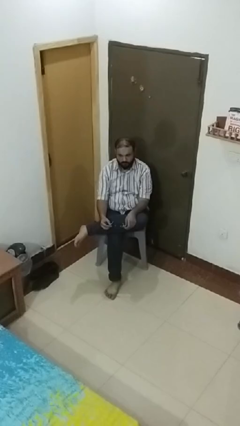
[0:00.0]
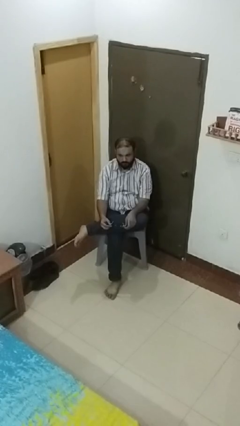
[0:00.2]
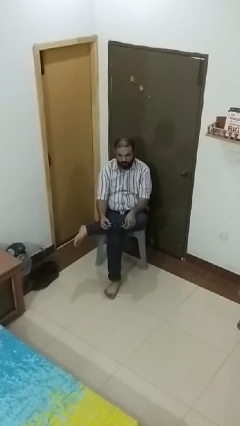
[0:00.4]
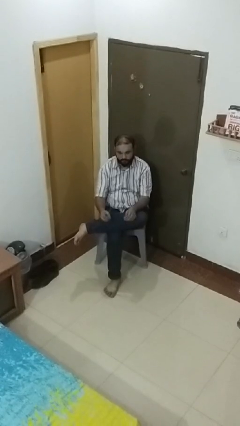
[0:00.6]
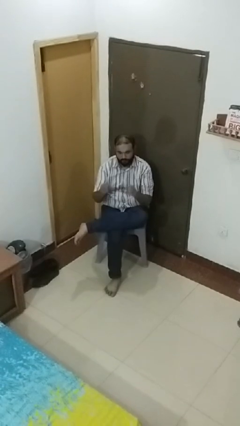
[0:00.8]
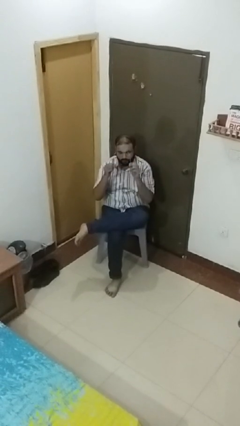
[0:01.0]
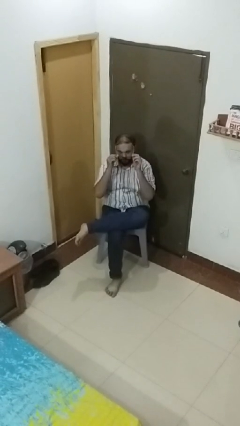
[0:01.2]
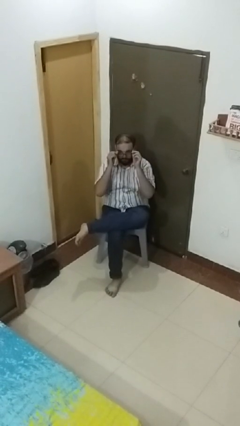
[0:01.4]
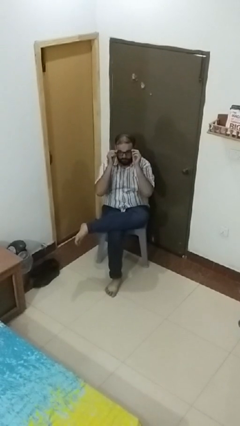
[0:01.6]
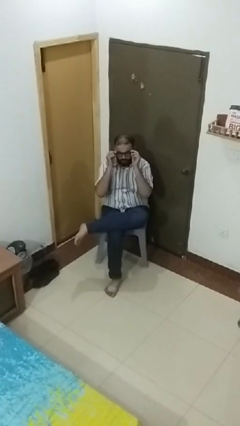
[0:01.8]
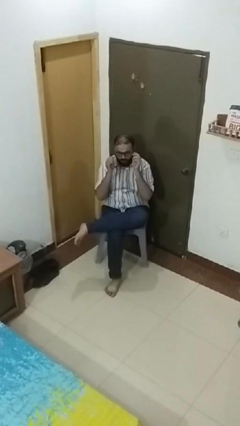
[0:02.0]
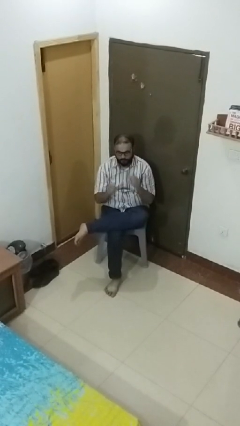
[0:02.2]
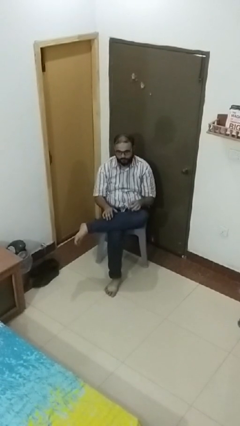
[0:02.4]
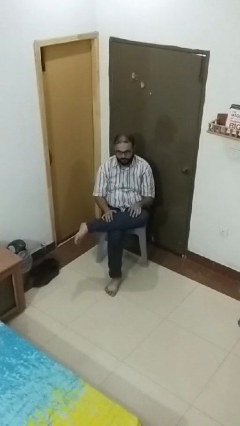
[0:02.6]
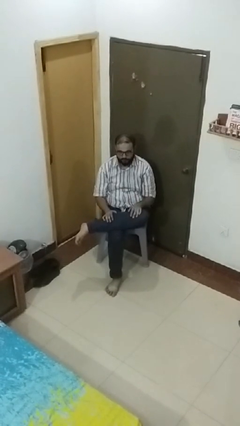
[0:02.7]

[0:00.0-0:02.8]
person puts on glasses

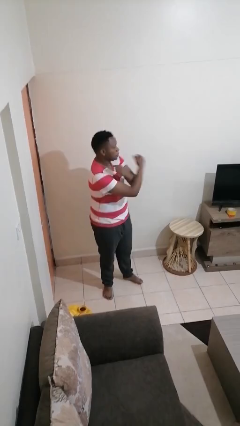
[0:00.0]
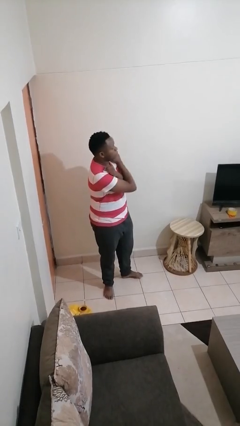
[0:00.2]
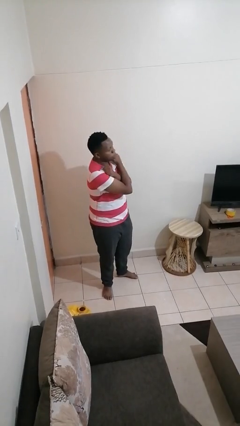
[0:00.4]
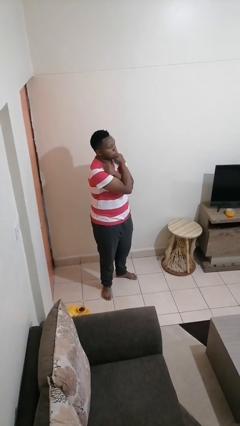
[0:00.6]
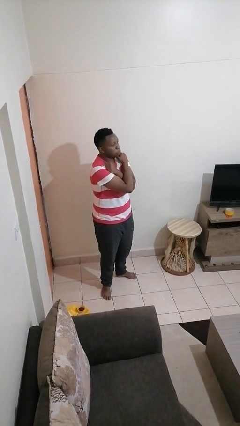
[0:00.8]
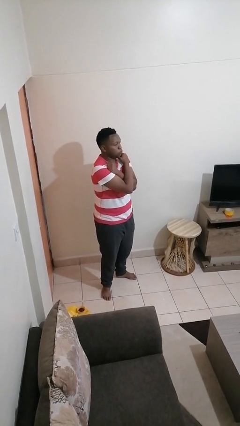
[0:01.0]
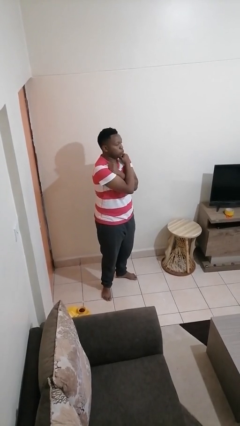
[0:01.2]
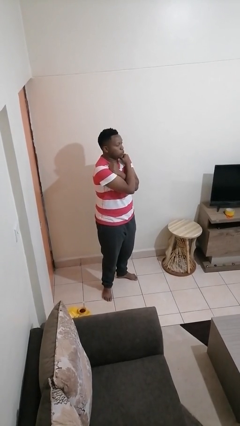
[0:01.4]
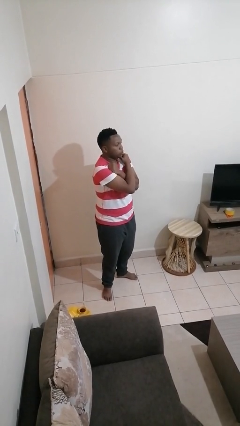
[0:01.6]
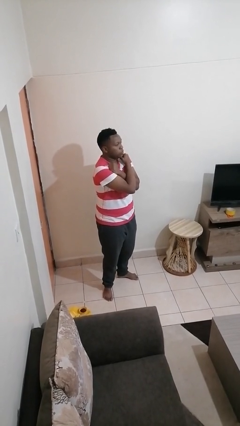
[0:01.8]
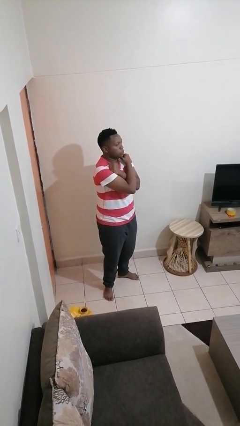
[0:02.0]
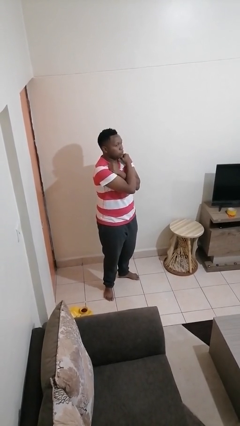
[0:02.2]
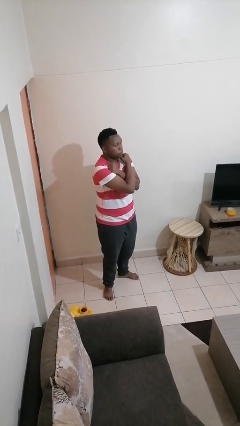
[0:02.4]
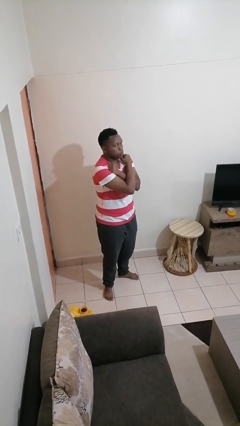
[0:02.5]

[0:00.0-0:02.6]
person gestures arms x

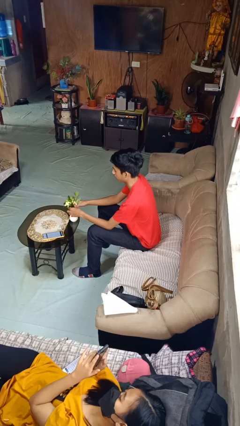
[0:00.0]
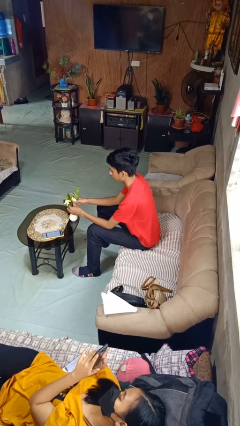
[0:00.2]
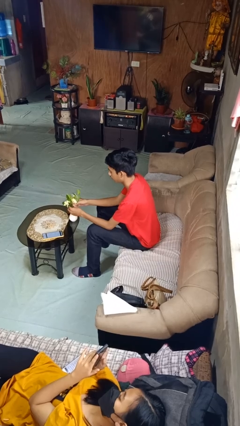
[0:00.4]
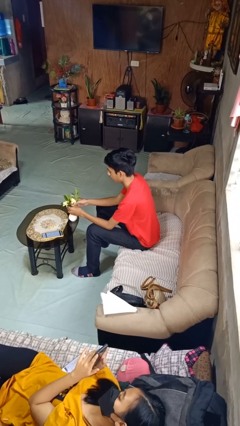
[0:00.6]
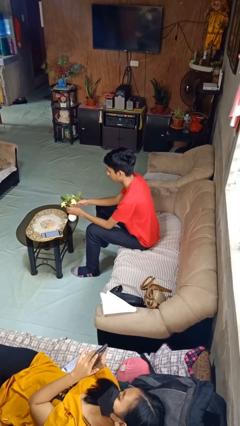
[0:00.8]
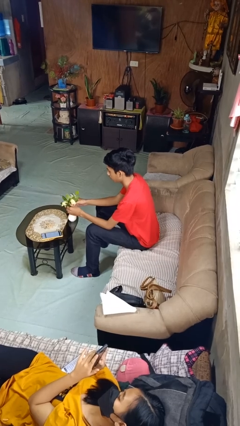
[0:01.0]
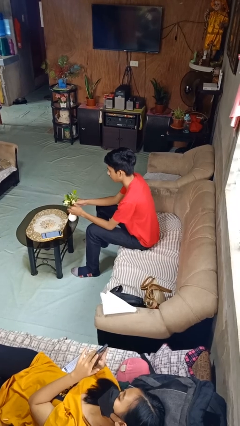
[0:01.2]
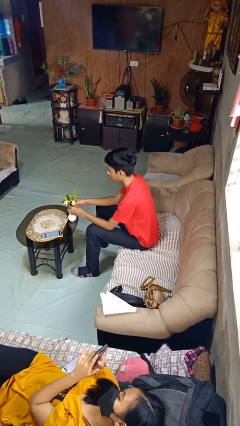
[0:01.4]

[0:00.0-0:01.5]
person arranges flowers in vase

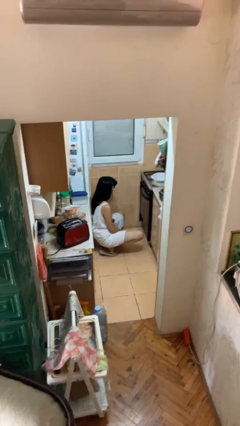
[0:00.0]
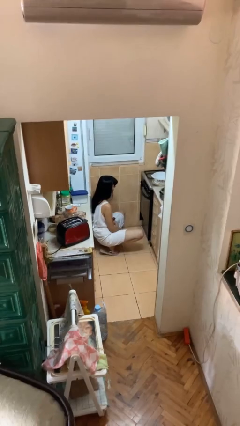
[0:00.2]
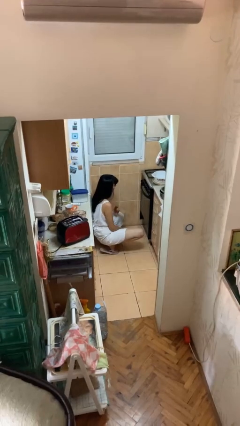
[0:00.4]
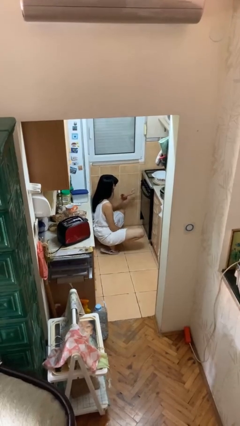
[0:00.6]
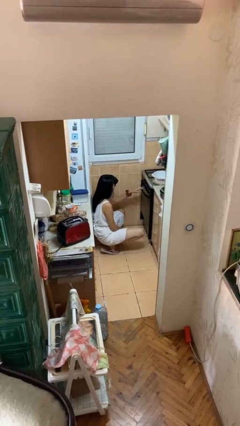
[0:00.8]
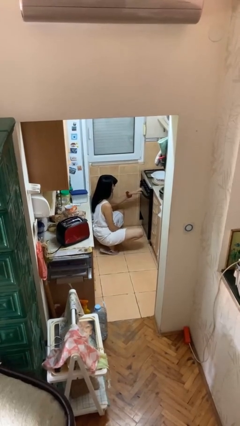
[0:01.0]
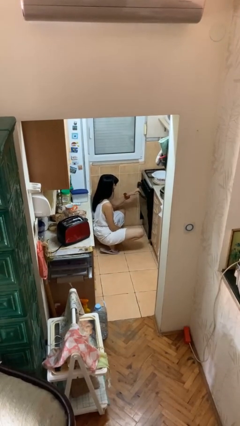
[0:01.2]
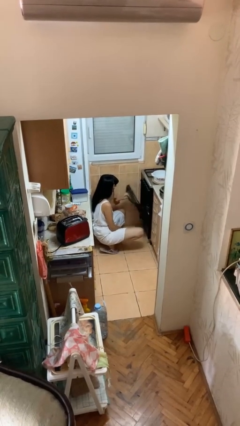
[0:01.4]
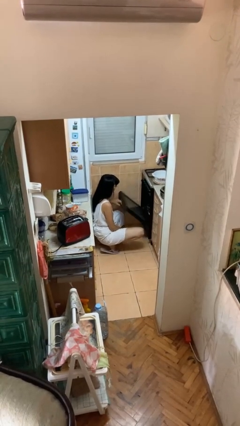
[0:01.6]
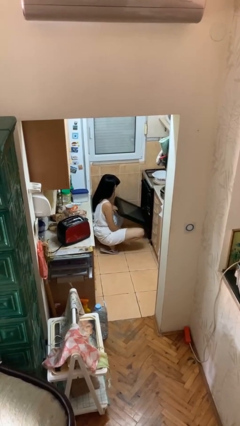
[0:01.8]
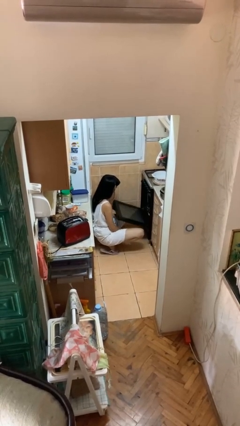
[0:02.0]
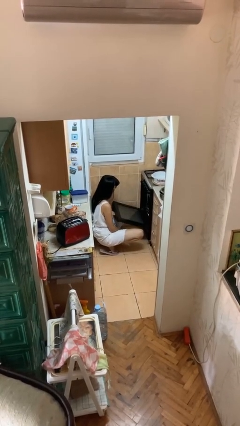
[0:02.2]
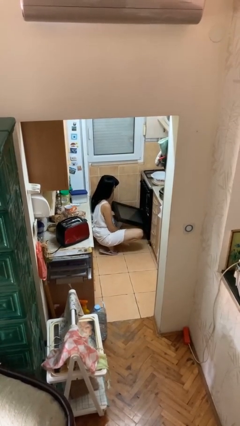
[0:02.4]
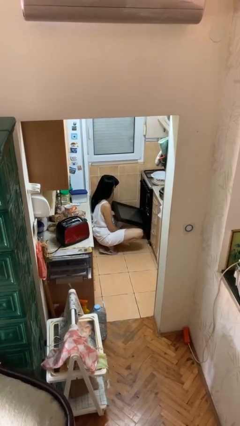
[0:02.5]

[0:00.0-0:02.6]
person opens oven door

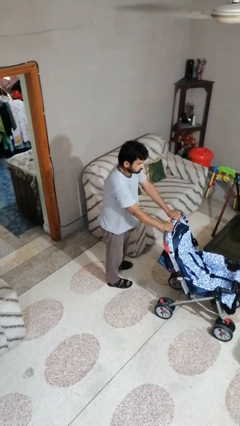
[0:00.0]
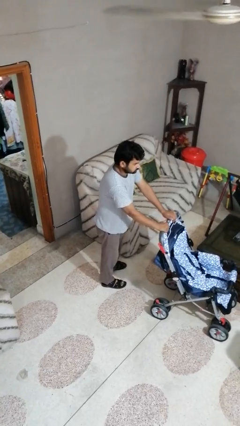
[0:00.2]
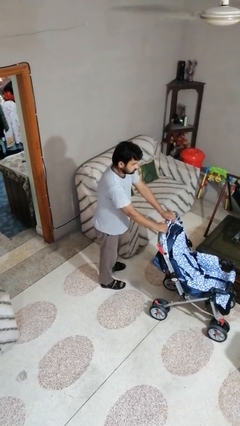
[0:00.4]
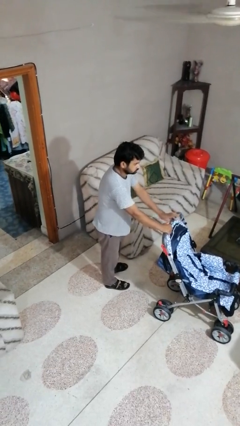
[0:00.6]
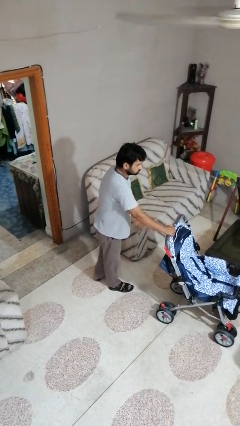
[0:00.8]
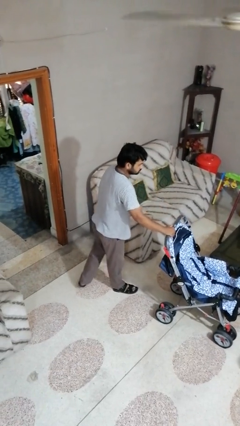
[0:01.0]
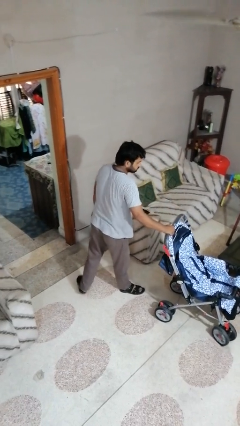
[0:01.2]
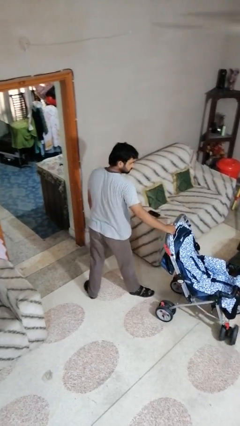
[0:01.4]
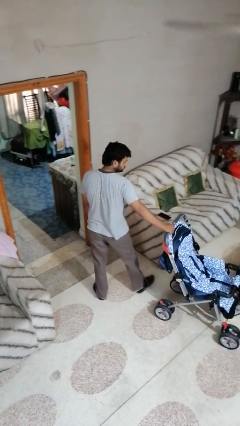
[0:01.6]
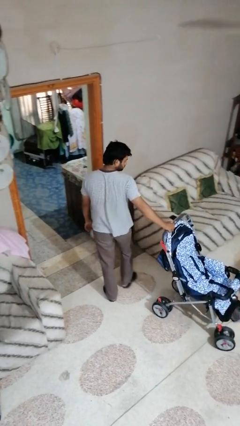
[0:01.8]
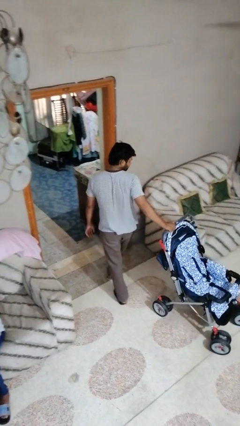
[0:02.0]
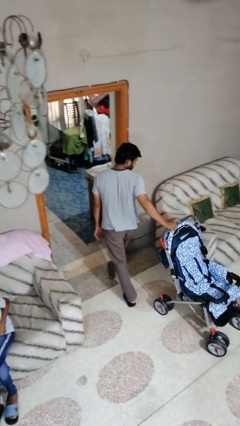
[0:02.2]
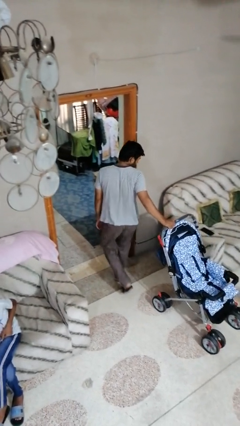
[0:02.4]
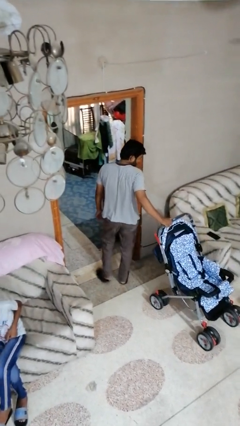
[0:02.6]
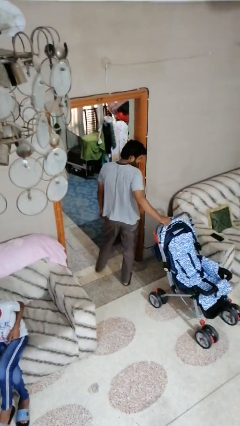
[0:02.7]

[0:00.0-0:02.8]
person pulls wheeled cart

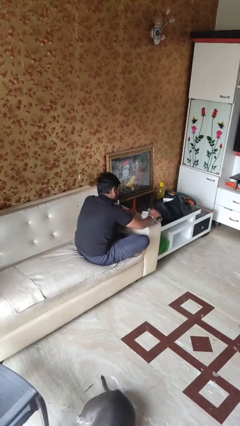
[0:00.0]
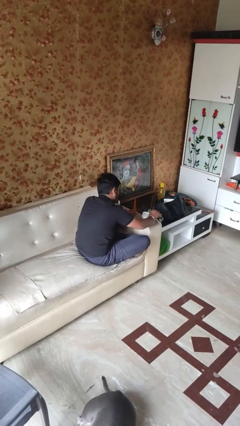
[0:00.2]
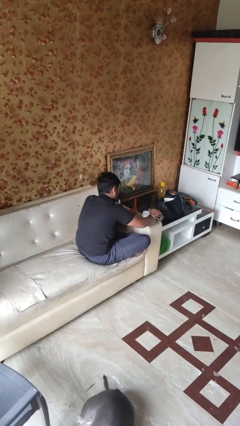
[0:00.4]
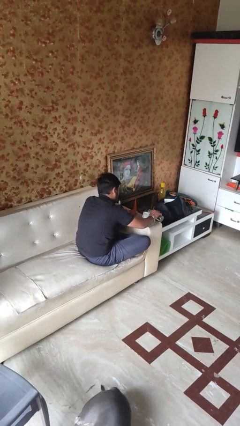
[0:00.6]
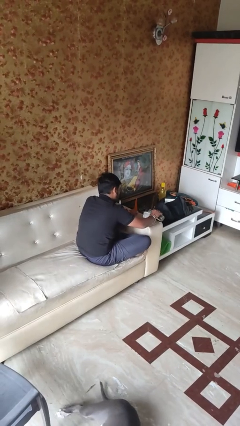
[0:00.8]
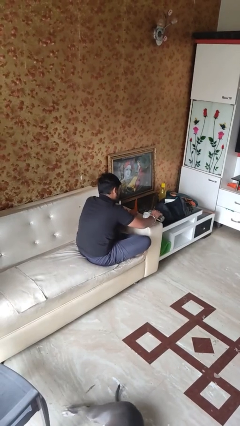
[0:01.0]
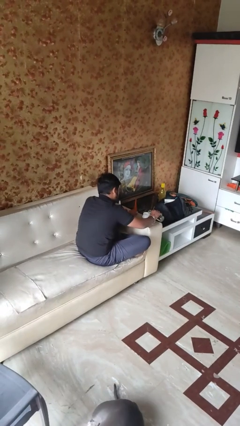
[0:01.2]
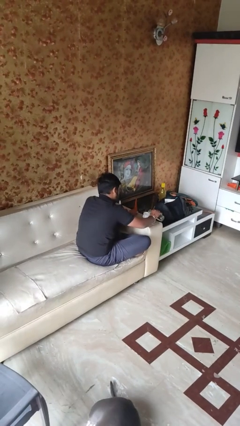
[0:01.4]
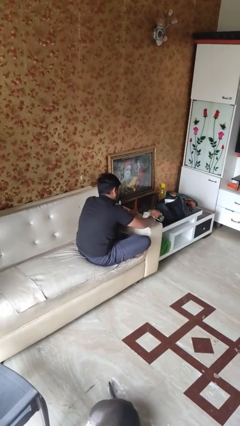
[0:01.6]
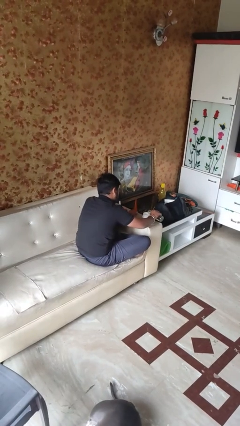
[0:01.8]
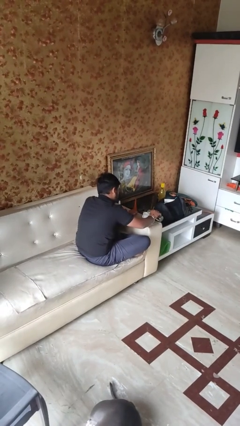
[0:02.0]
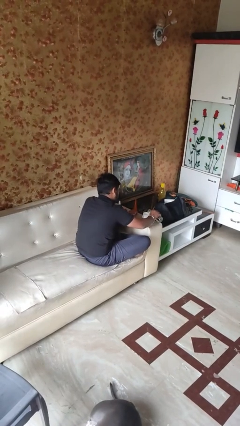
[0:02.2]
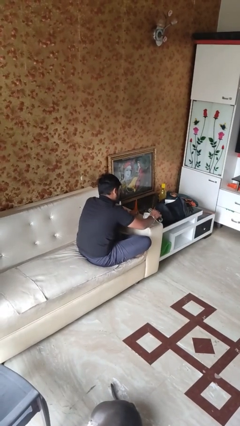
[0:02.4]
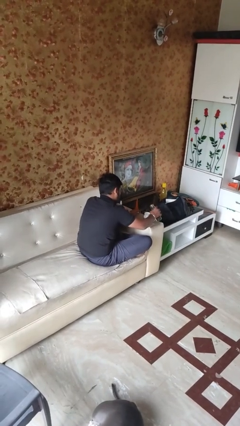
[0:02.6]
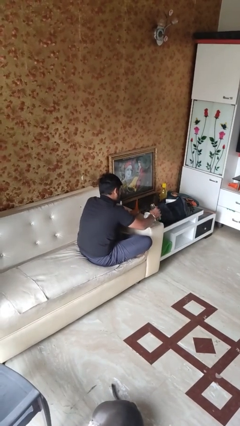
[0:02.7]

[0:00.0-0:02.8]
person pours liquid into cup

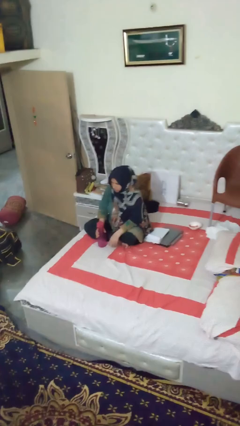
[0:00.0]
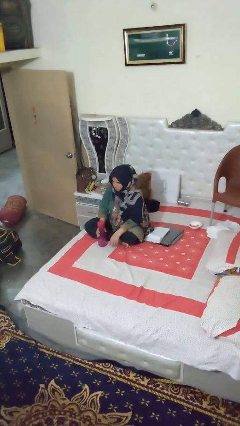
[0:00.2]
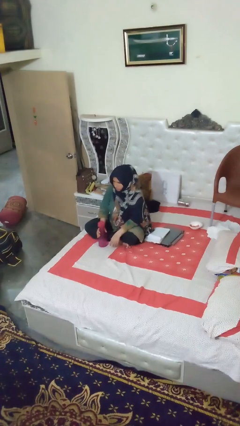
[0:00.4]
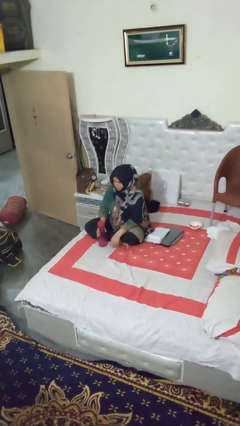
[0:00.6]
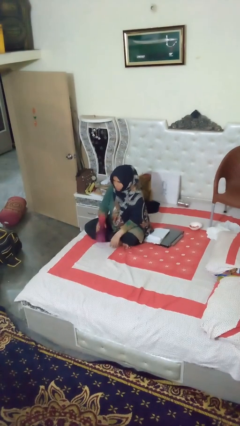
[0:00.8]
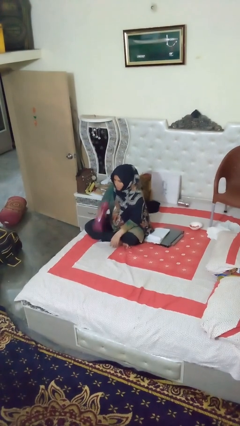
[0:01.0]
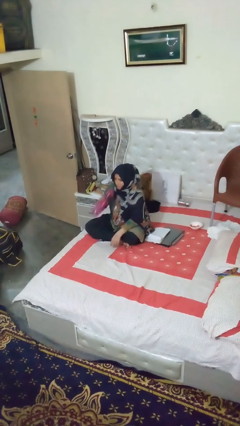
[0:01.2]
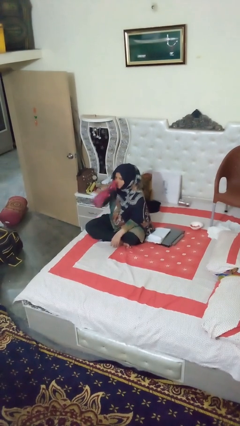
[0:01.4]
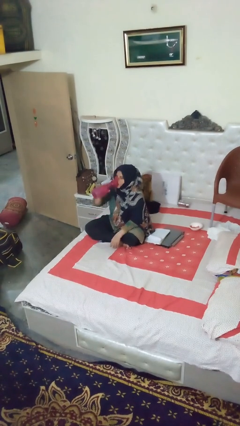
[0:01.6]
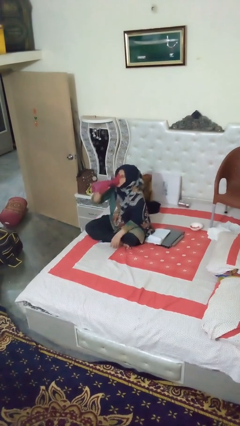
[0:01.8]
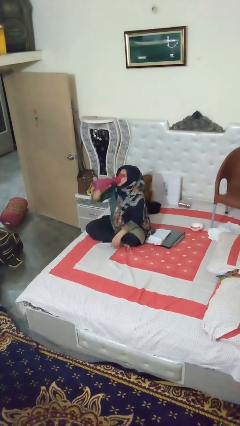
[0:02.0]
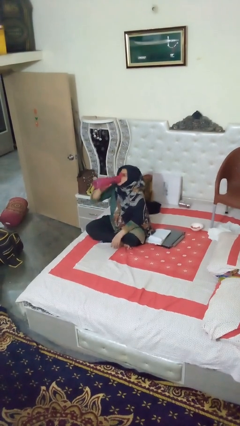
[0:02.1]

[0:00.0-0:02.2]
person drinks from bottle
